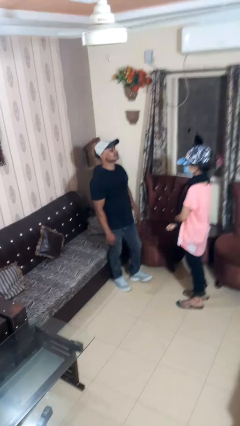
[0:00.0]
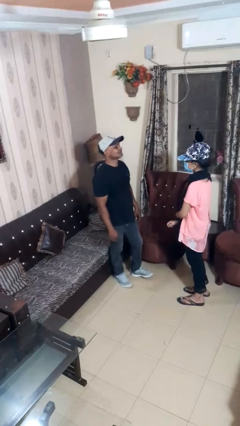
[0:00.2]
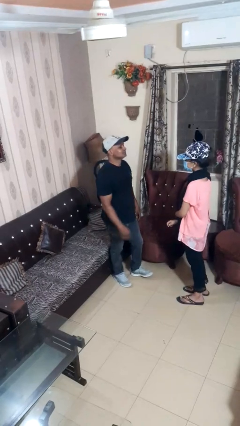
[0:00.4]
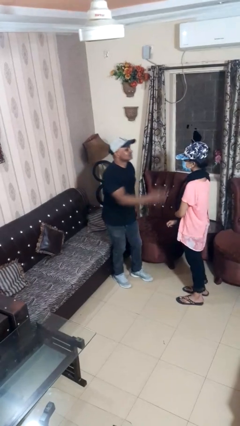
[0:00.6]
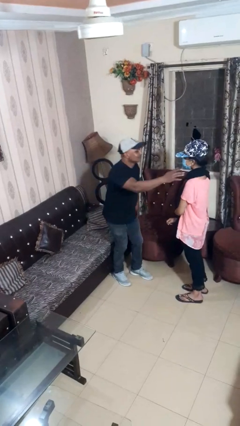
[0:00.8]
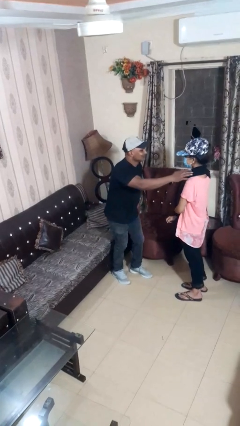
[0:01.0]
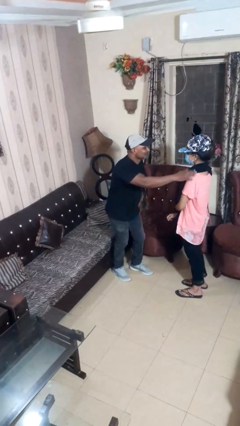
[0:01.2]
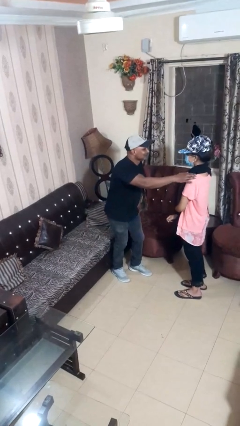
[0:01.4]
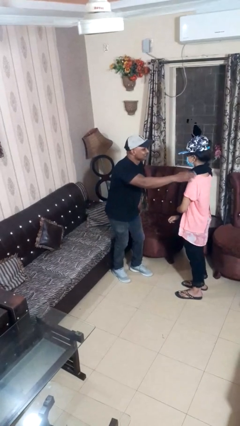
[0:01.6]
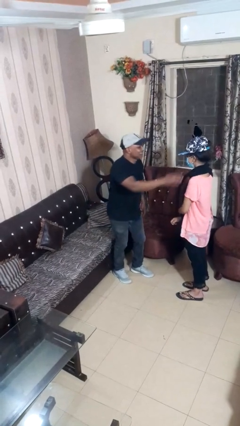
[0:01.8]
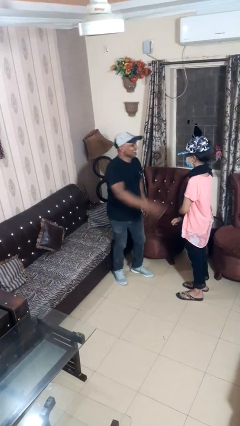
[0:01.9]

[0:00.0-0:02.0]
person pounds shoulders of person

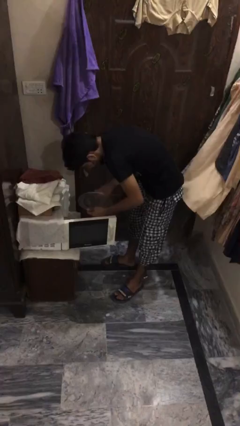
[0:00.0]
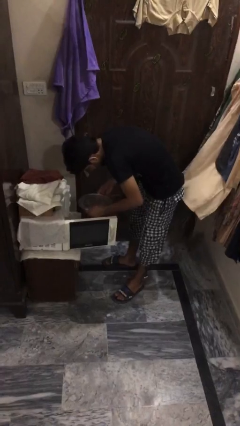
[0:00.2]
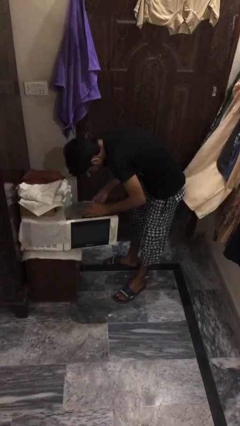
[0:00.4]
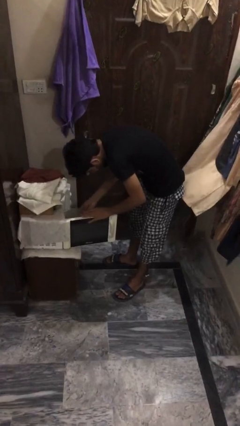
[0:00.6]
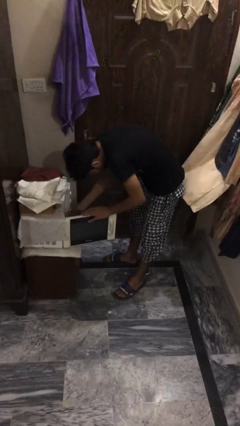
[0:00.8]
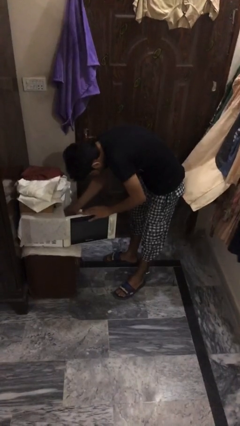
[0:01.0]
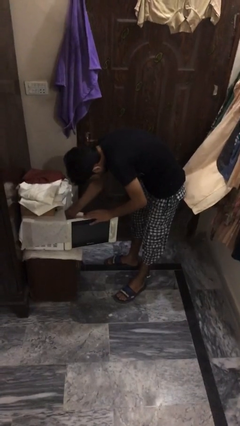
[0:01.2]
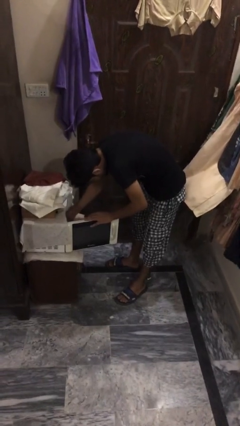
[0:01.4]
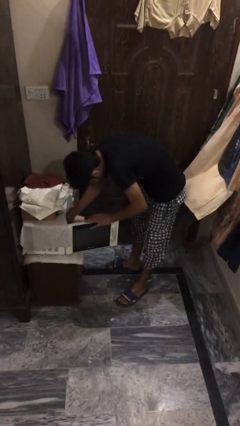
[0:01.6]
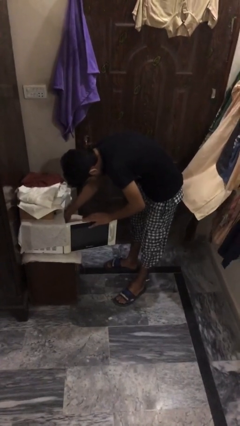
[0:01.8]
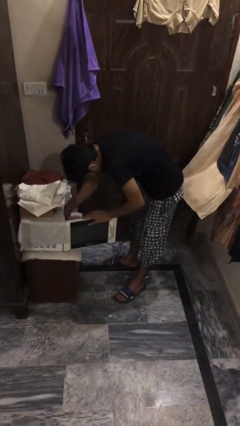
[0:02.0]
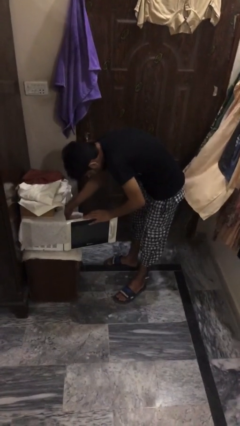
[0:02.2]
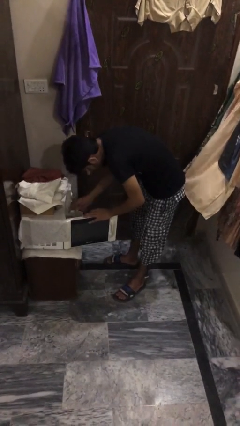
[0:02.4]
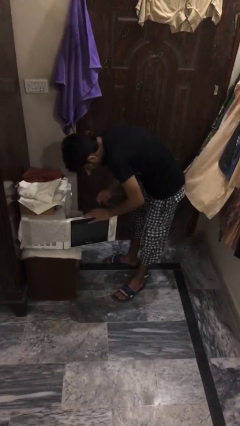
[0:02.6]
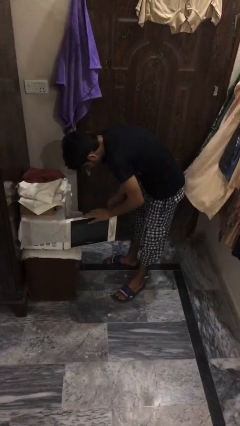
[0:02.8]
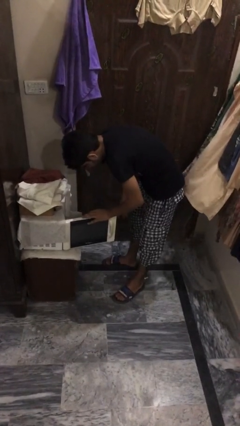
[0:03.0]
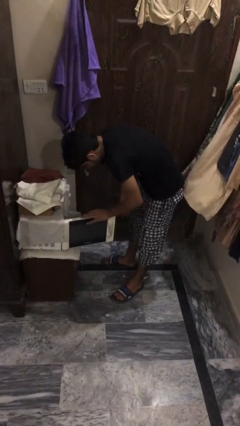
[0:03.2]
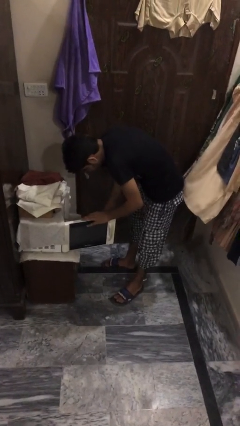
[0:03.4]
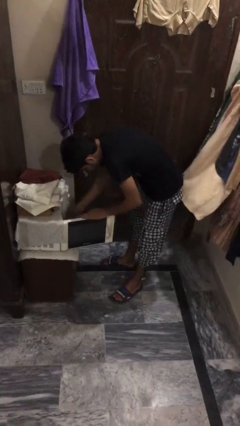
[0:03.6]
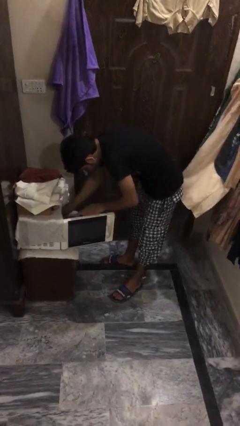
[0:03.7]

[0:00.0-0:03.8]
person puts object into oven

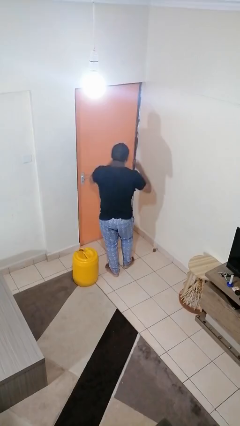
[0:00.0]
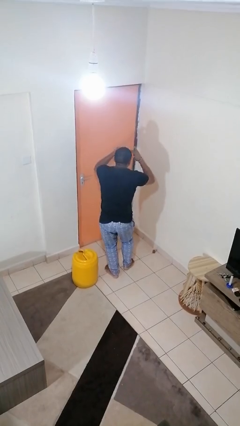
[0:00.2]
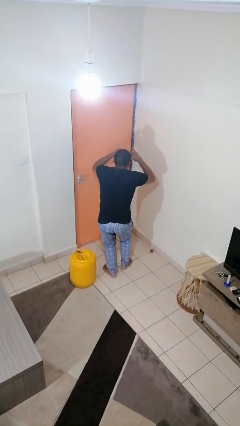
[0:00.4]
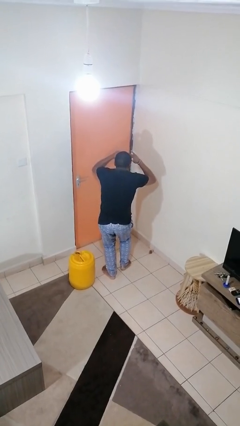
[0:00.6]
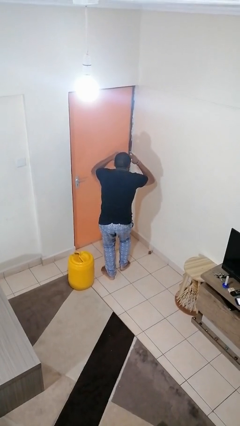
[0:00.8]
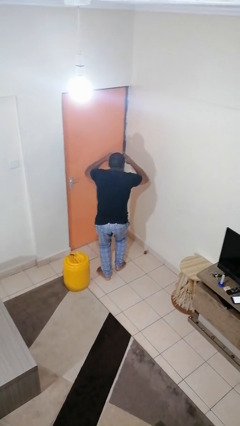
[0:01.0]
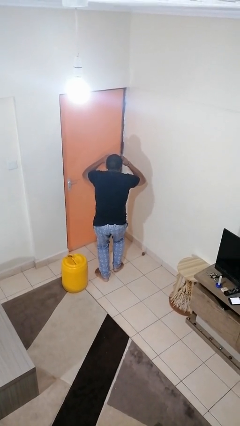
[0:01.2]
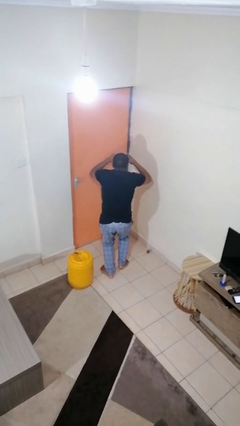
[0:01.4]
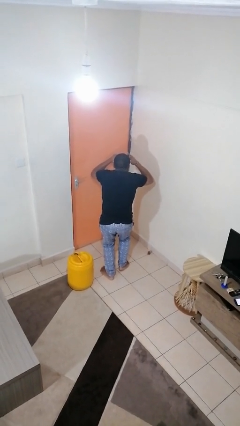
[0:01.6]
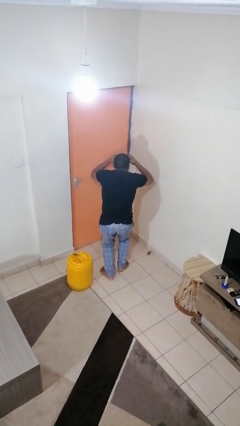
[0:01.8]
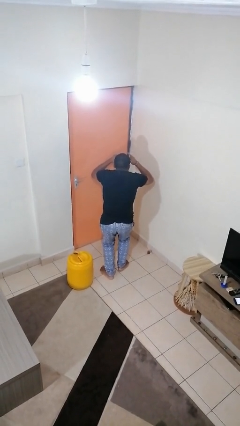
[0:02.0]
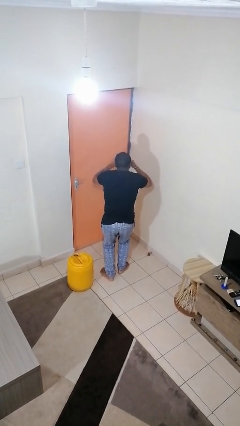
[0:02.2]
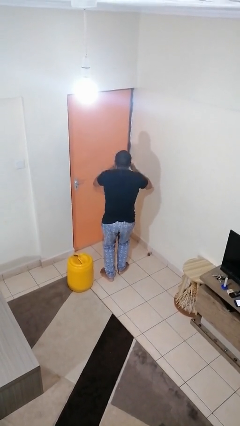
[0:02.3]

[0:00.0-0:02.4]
person shades eyes

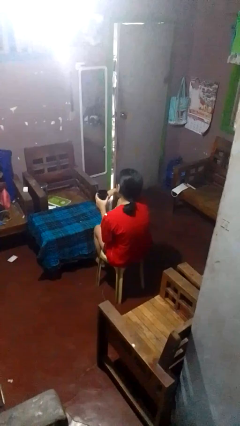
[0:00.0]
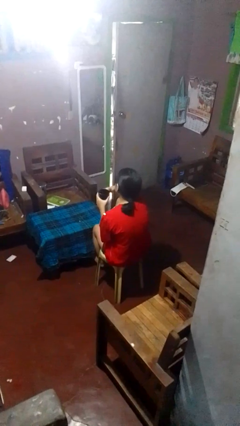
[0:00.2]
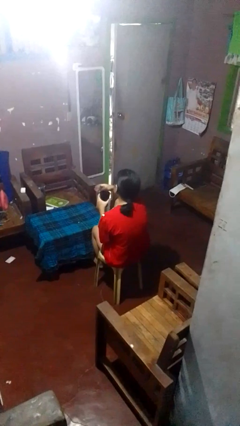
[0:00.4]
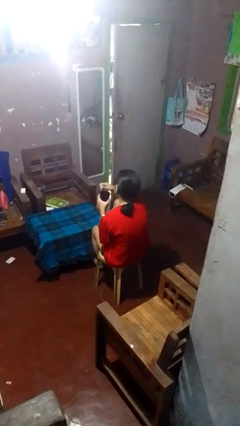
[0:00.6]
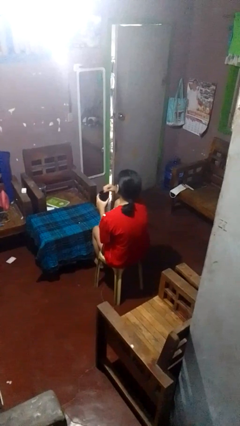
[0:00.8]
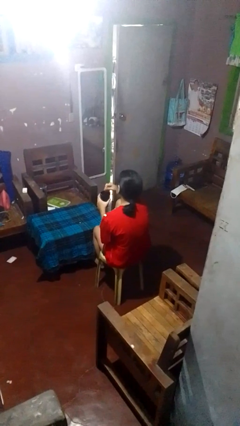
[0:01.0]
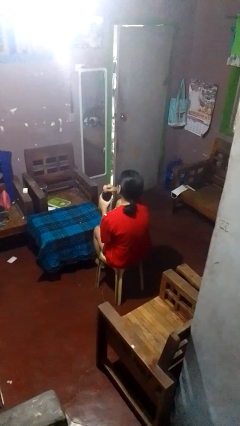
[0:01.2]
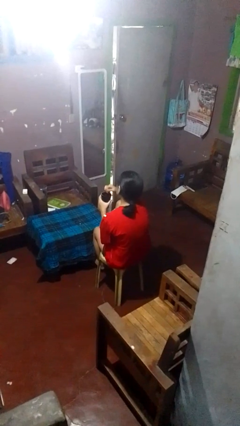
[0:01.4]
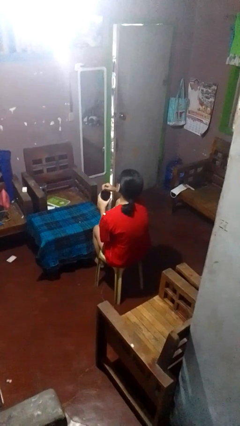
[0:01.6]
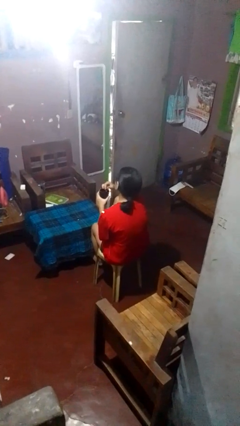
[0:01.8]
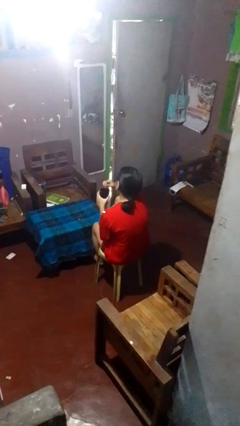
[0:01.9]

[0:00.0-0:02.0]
person stirs mug

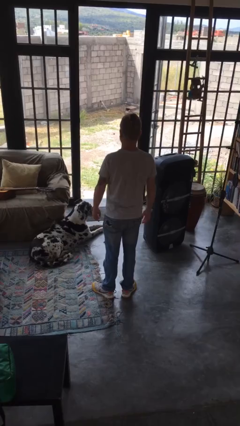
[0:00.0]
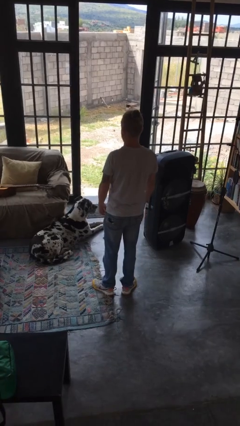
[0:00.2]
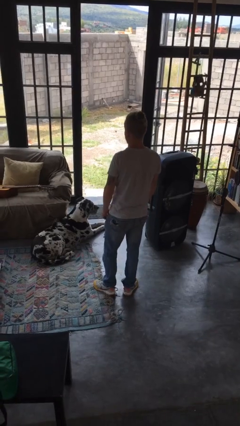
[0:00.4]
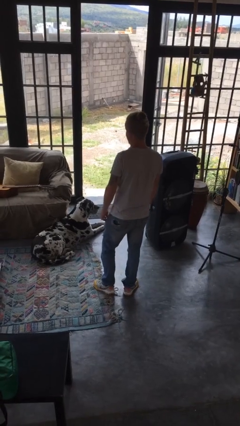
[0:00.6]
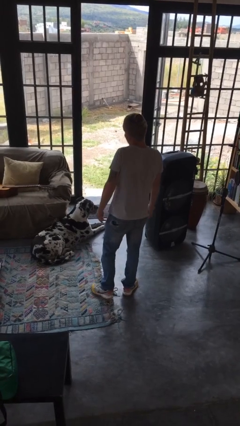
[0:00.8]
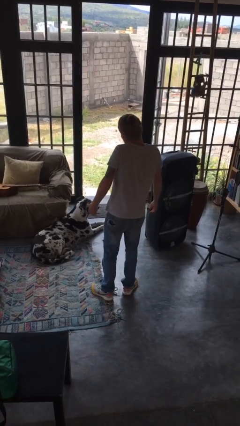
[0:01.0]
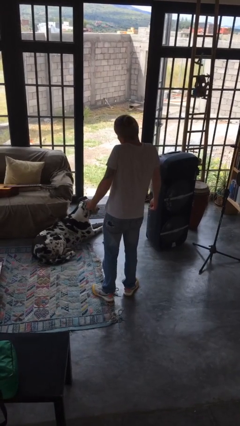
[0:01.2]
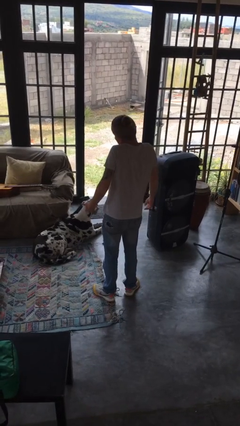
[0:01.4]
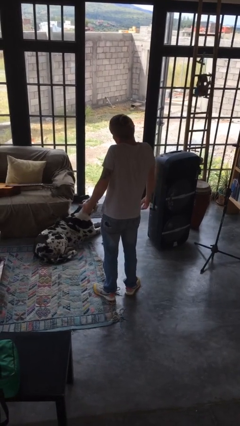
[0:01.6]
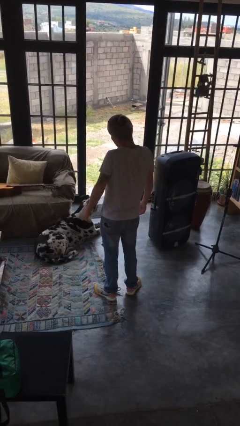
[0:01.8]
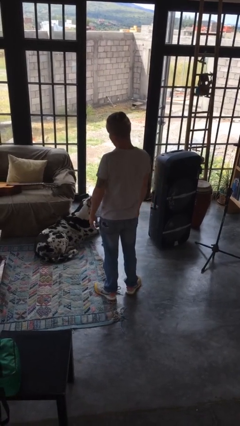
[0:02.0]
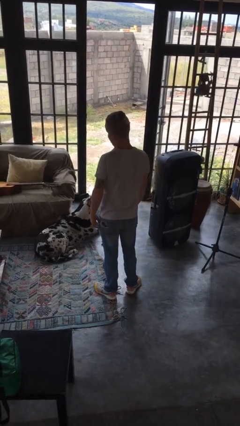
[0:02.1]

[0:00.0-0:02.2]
person shrugs

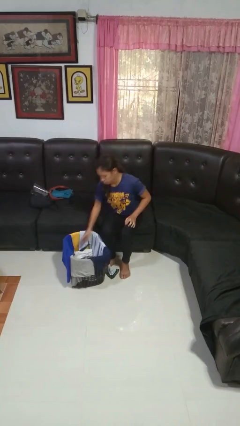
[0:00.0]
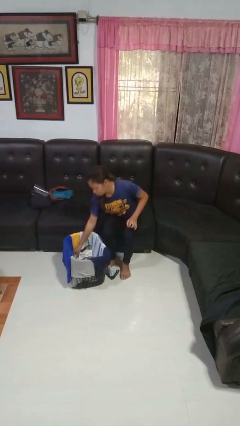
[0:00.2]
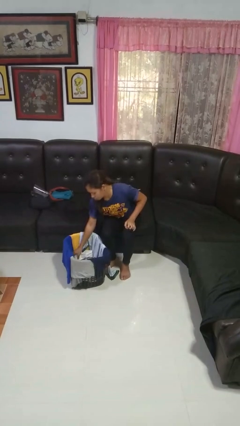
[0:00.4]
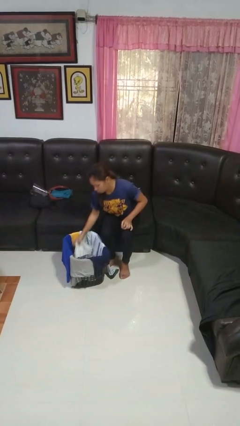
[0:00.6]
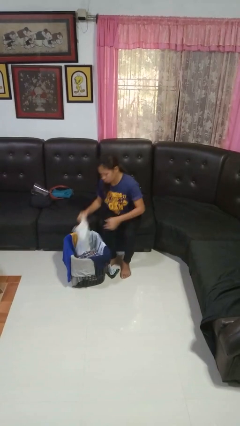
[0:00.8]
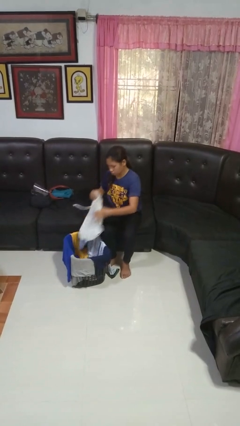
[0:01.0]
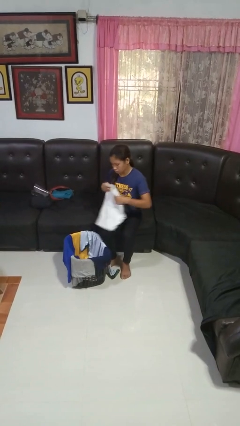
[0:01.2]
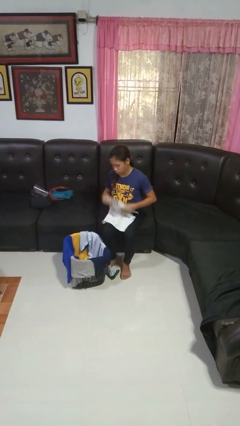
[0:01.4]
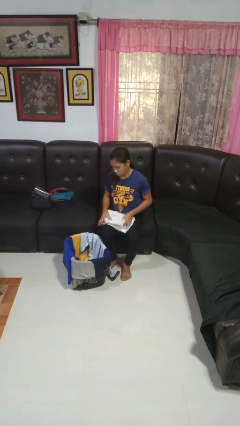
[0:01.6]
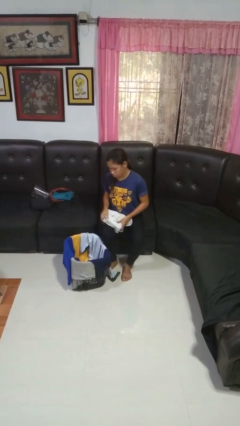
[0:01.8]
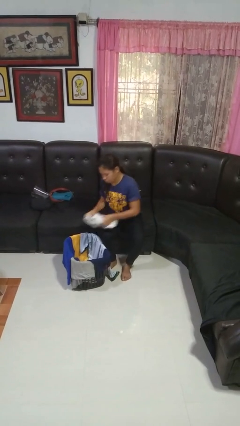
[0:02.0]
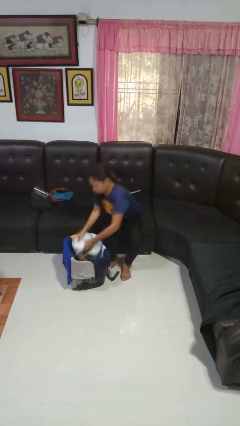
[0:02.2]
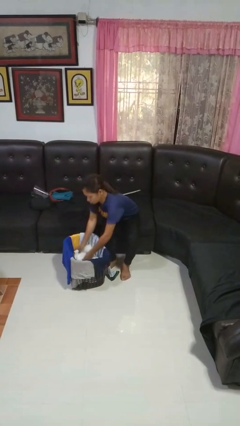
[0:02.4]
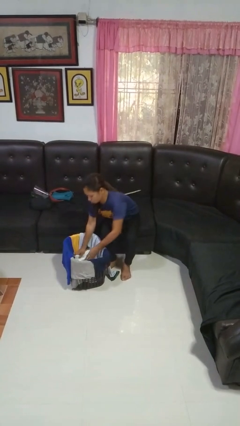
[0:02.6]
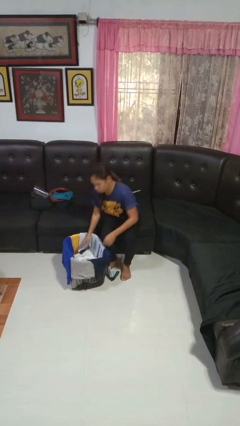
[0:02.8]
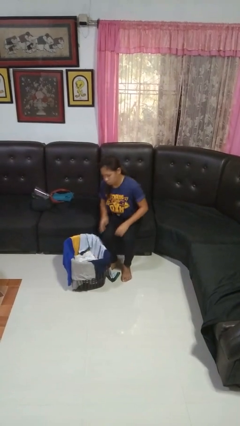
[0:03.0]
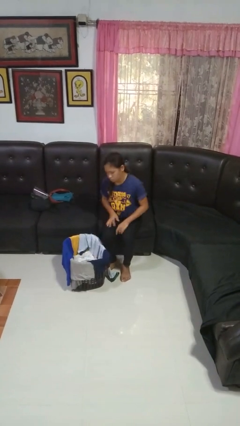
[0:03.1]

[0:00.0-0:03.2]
person folds pants

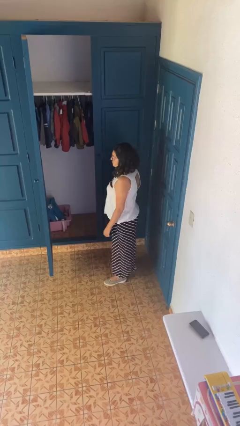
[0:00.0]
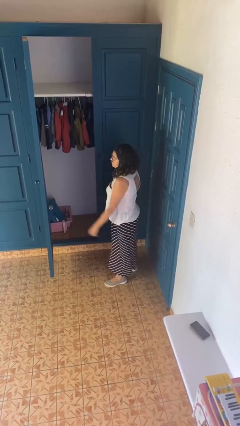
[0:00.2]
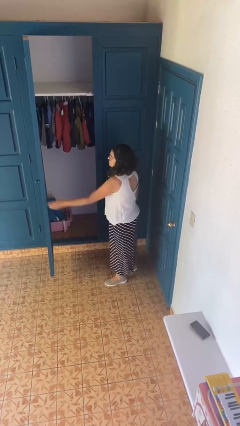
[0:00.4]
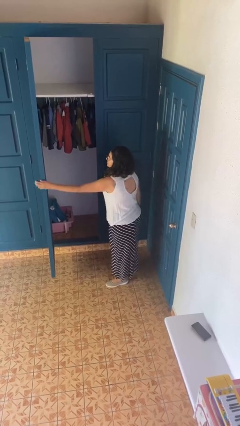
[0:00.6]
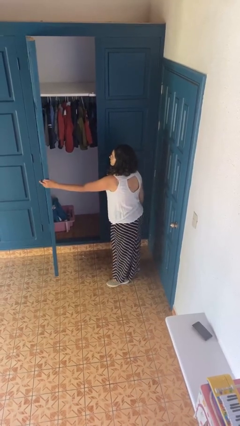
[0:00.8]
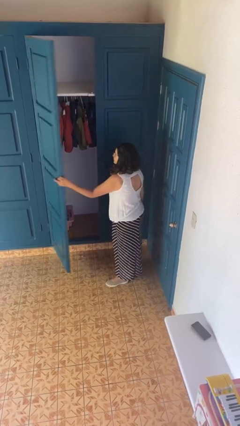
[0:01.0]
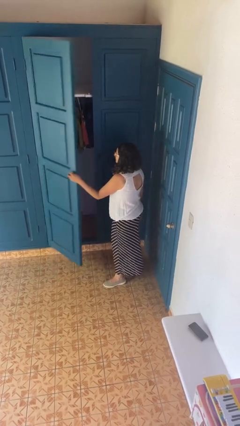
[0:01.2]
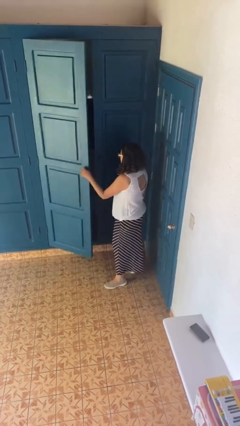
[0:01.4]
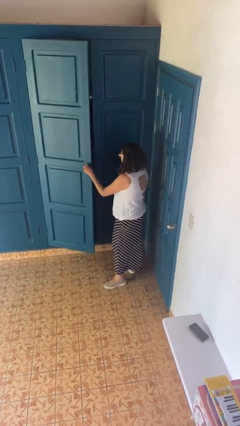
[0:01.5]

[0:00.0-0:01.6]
person closes closet door
